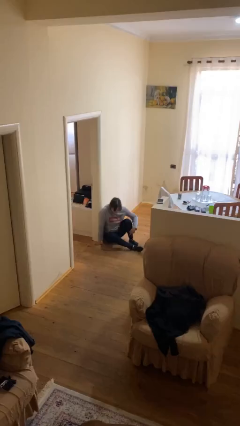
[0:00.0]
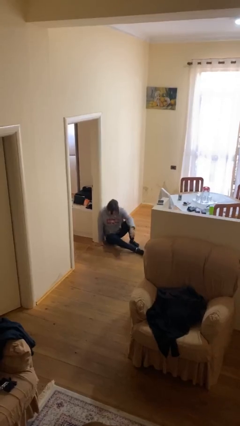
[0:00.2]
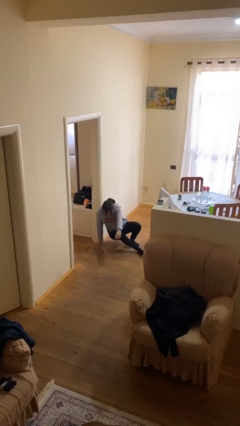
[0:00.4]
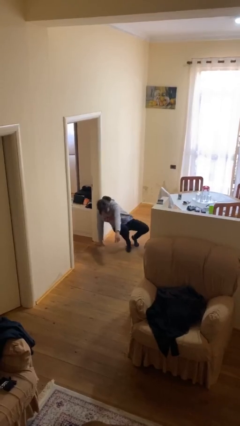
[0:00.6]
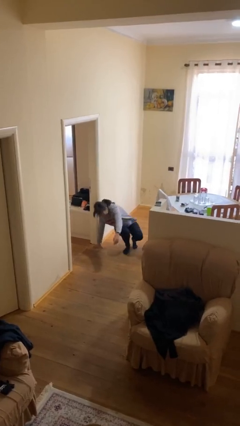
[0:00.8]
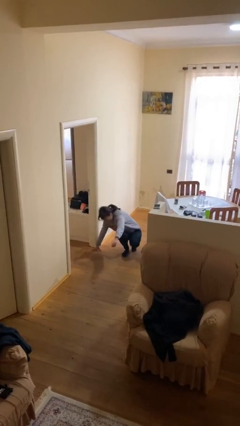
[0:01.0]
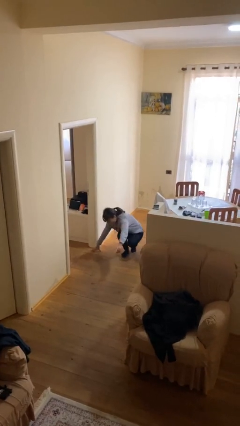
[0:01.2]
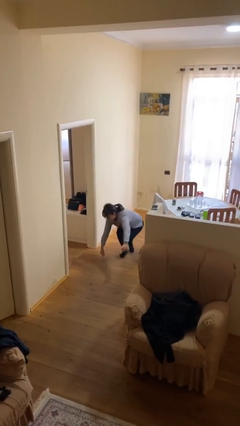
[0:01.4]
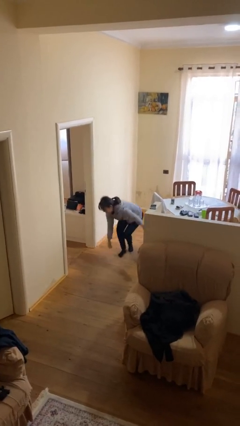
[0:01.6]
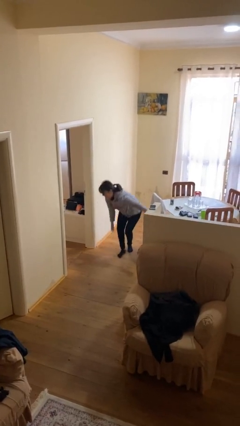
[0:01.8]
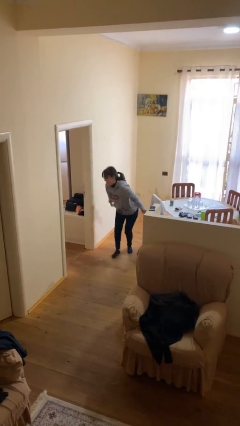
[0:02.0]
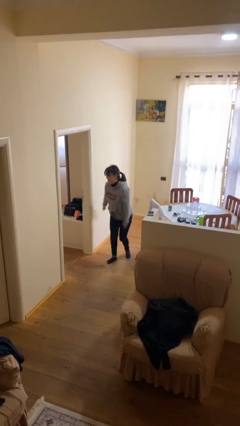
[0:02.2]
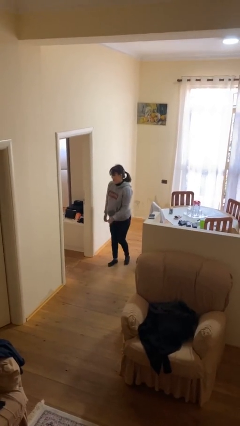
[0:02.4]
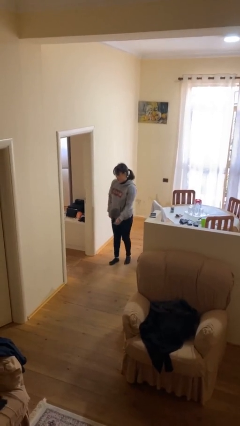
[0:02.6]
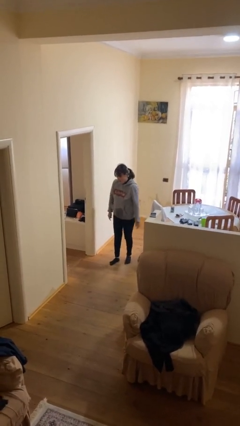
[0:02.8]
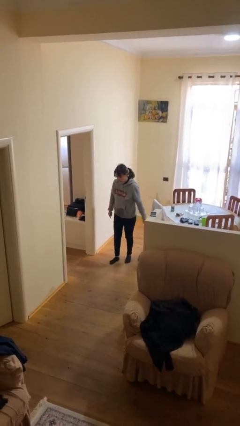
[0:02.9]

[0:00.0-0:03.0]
person stands up

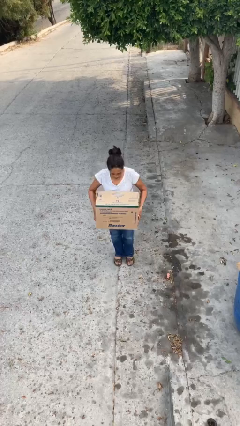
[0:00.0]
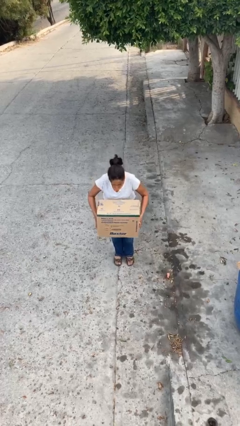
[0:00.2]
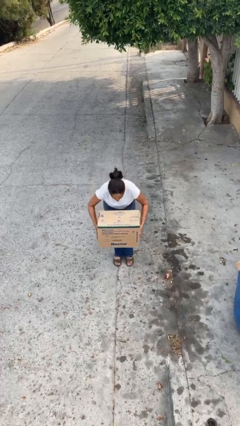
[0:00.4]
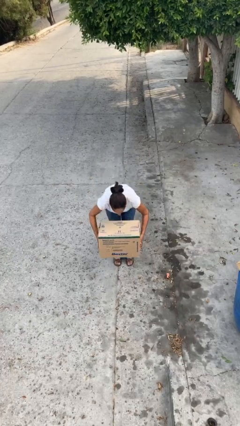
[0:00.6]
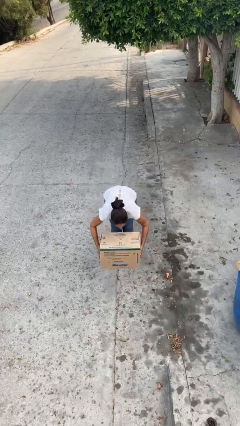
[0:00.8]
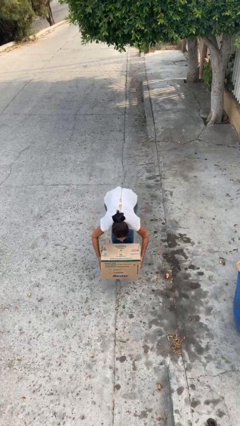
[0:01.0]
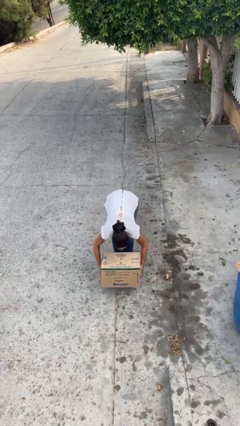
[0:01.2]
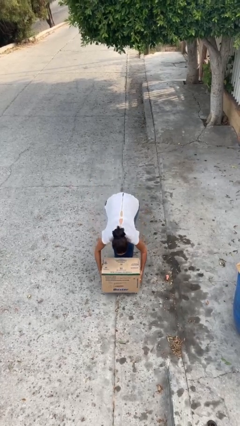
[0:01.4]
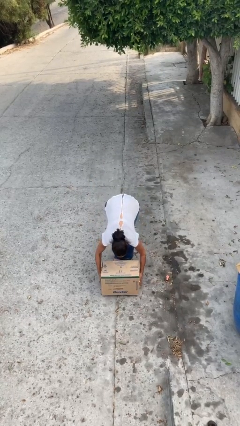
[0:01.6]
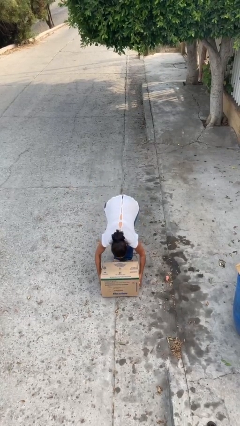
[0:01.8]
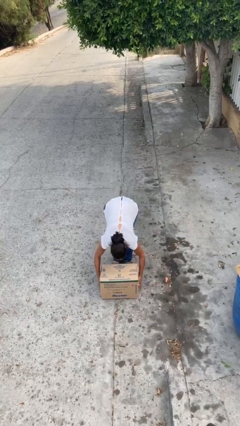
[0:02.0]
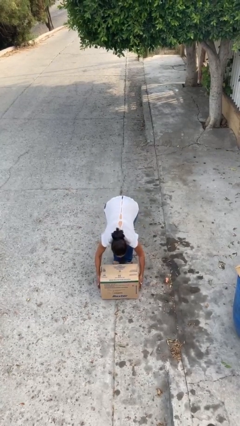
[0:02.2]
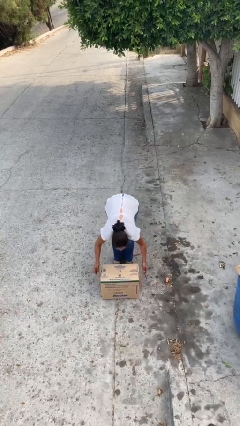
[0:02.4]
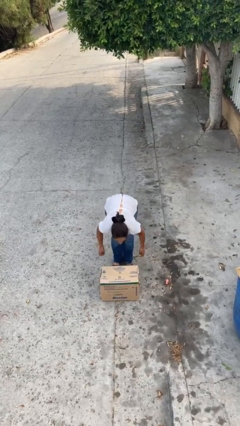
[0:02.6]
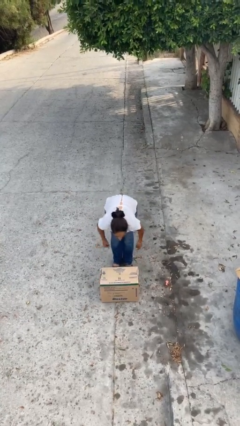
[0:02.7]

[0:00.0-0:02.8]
person puts down object on floor

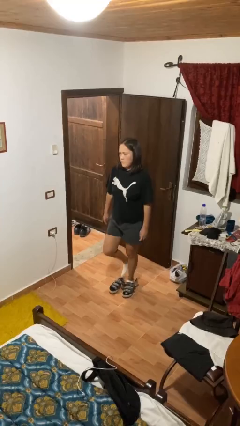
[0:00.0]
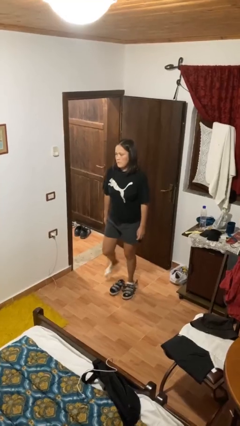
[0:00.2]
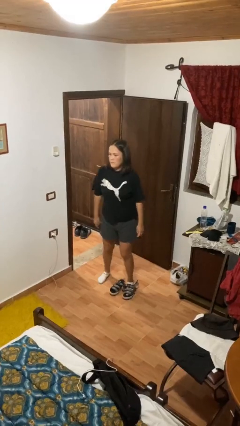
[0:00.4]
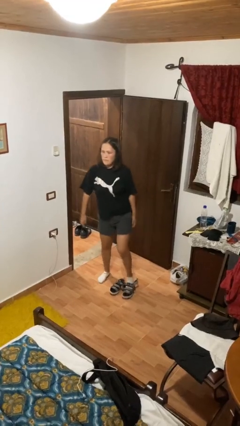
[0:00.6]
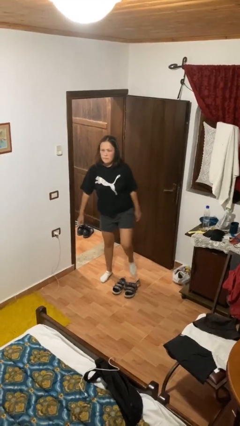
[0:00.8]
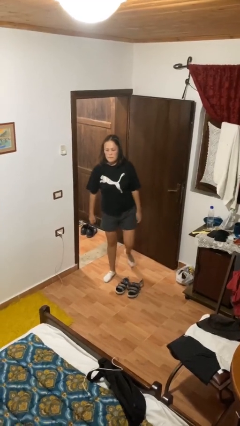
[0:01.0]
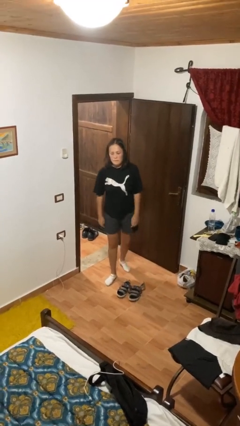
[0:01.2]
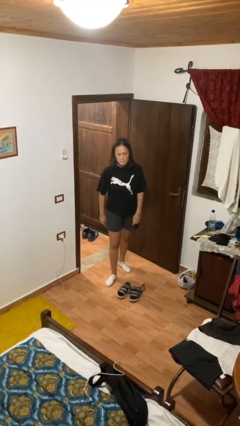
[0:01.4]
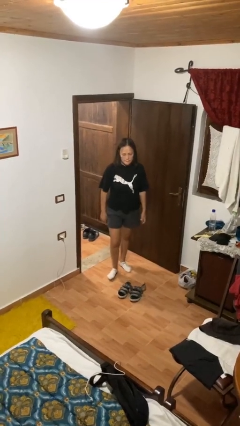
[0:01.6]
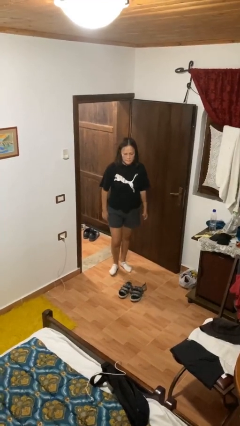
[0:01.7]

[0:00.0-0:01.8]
person takes off shoes

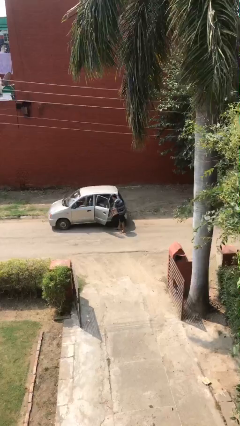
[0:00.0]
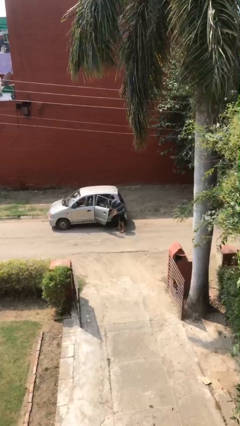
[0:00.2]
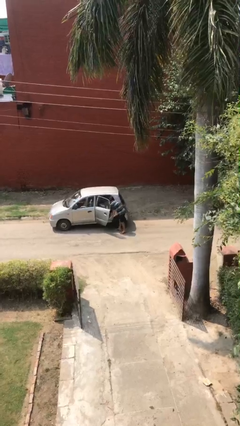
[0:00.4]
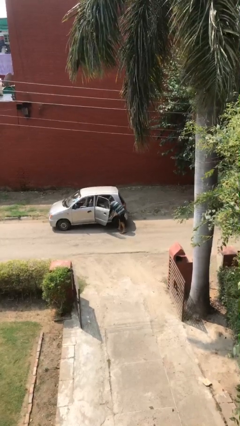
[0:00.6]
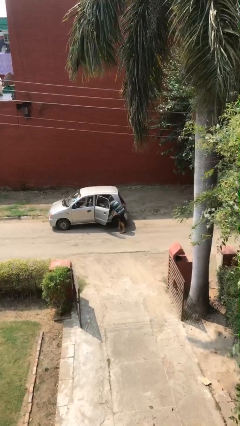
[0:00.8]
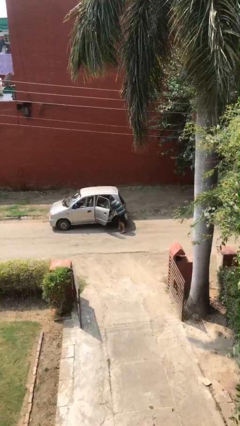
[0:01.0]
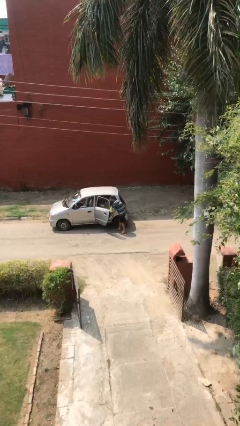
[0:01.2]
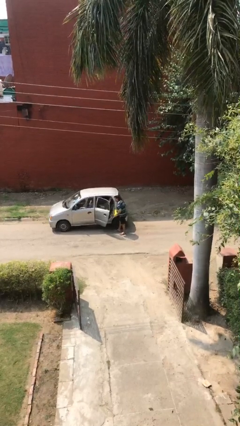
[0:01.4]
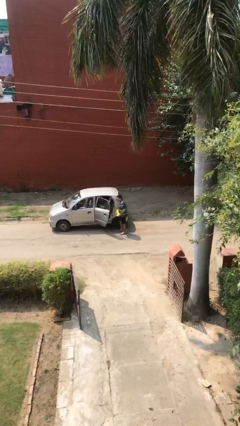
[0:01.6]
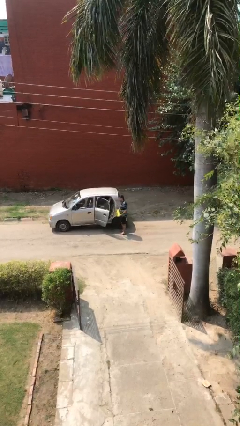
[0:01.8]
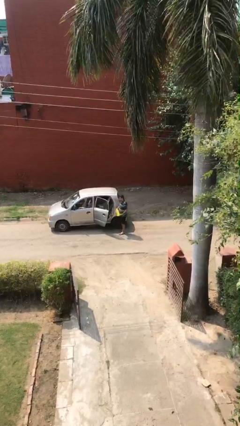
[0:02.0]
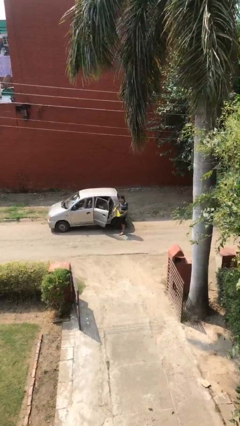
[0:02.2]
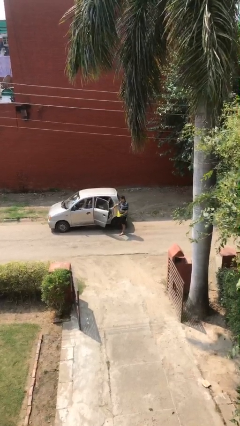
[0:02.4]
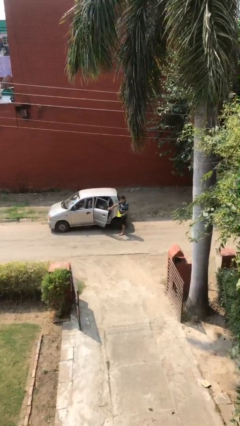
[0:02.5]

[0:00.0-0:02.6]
person unloads car

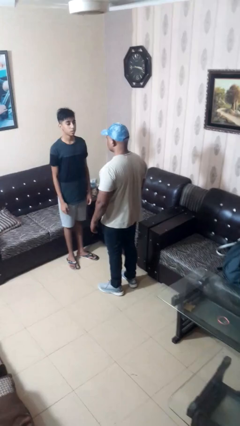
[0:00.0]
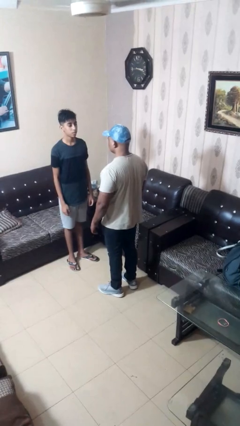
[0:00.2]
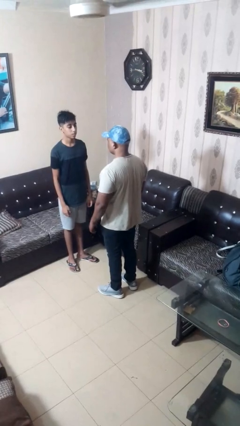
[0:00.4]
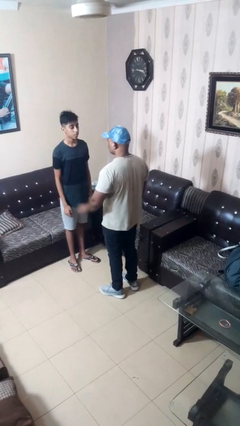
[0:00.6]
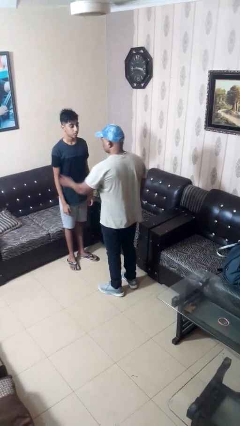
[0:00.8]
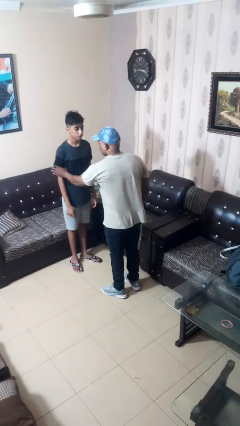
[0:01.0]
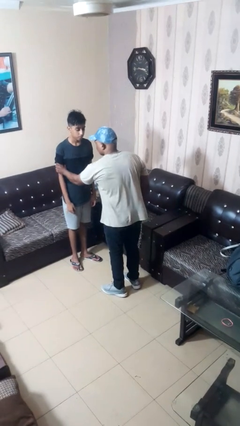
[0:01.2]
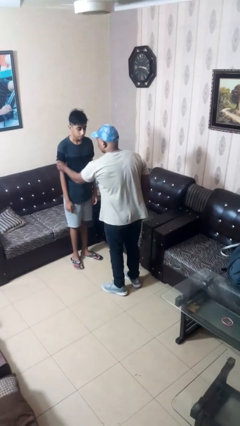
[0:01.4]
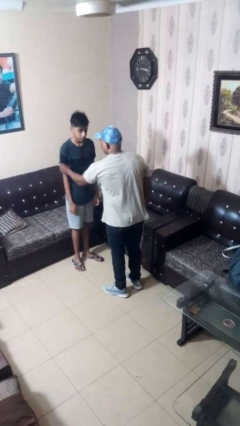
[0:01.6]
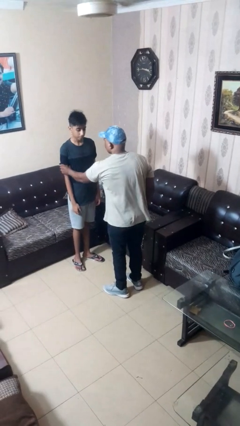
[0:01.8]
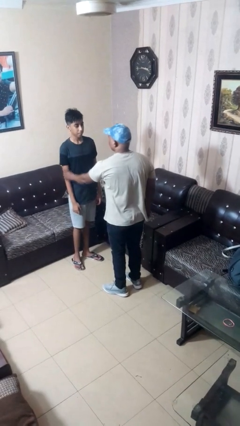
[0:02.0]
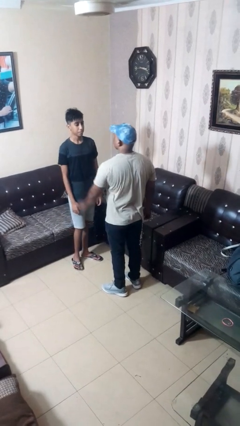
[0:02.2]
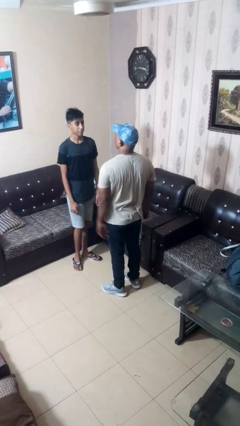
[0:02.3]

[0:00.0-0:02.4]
person grabs person by bicep

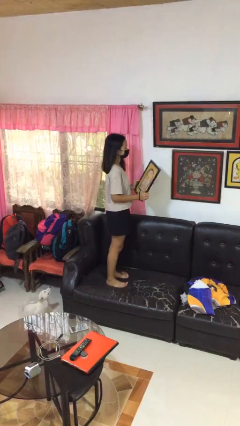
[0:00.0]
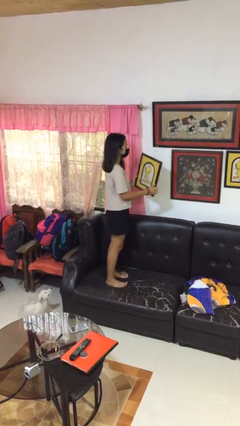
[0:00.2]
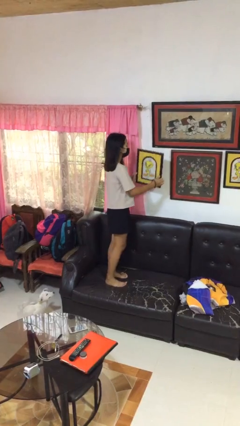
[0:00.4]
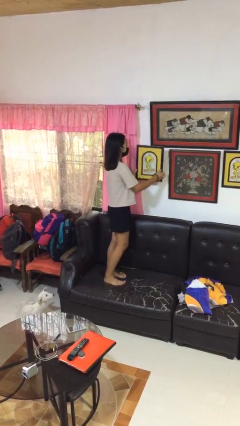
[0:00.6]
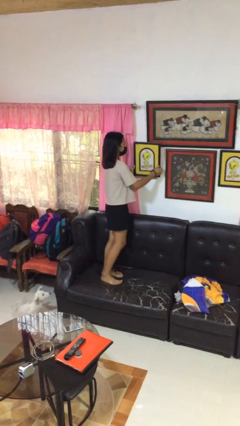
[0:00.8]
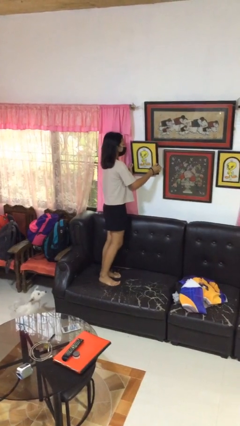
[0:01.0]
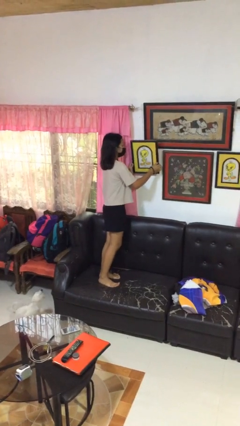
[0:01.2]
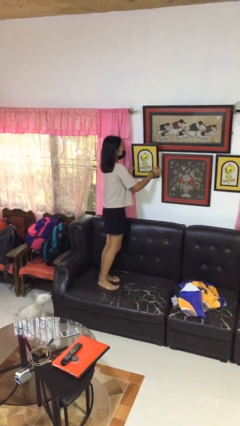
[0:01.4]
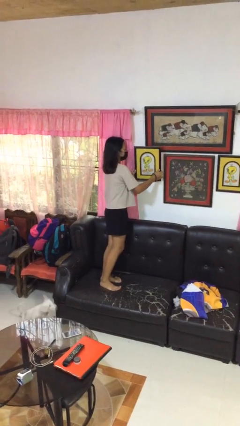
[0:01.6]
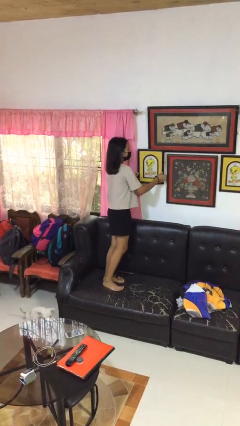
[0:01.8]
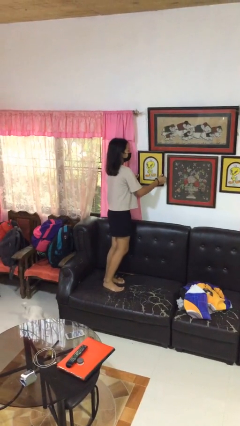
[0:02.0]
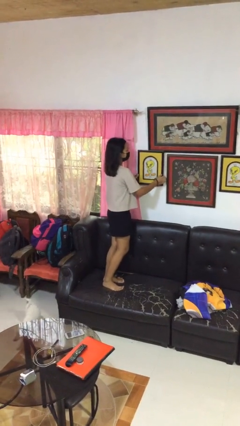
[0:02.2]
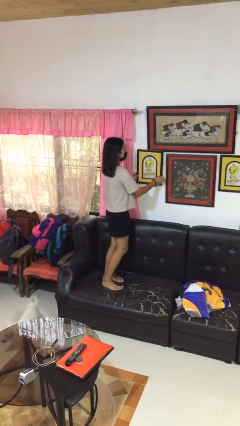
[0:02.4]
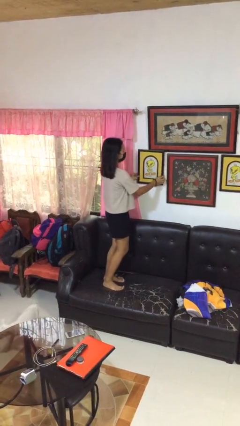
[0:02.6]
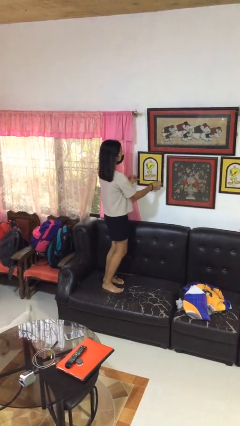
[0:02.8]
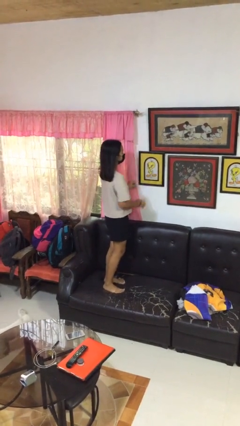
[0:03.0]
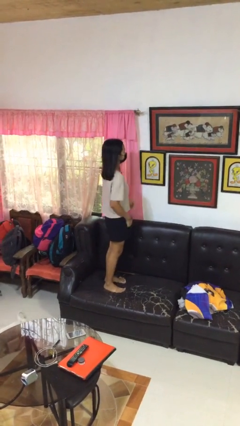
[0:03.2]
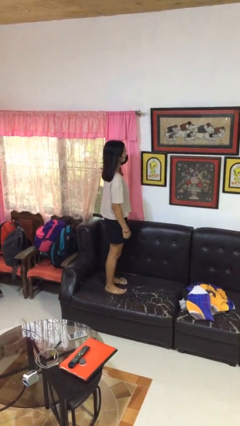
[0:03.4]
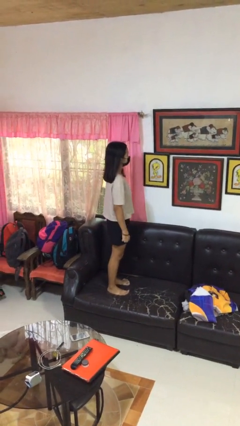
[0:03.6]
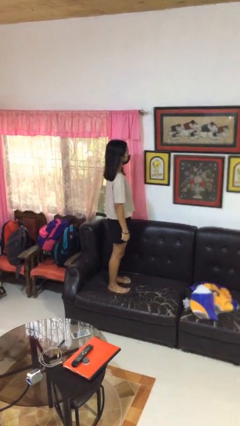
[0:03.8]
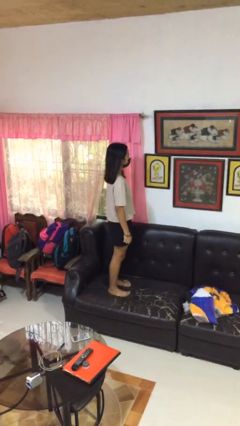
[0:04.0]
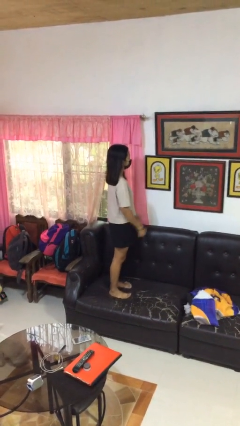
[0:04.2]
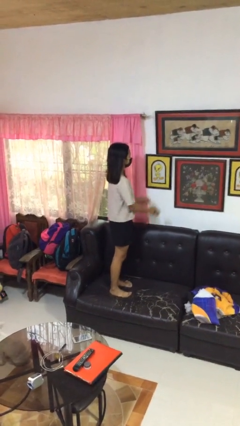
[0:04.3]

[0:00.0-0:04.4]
person puts up picture frame

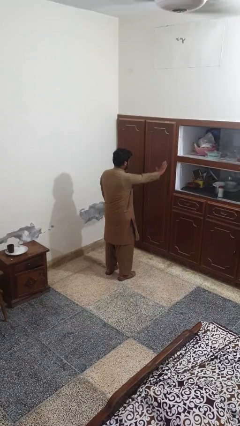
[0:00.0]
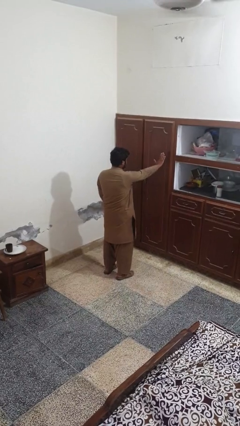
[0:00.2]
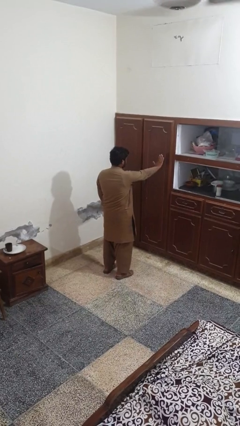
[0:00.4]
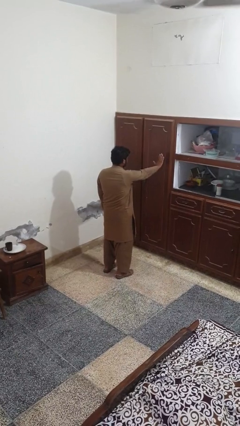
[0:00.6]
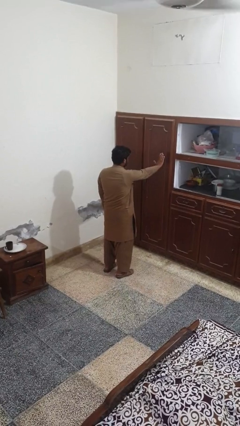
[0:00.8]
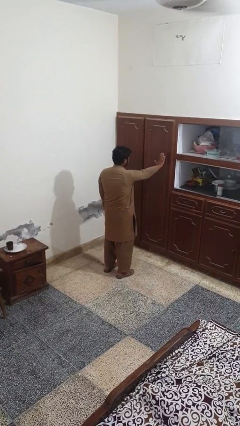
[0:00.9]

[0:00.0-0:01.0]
person gestures stop
